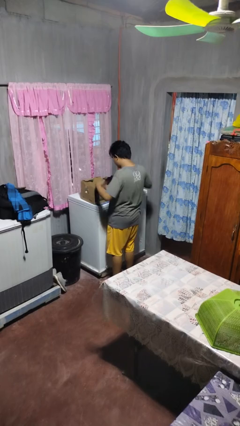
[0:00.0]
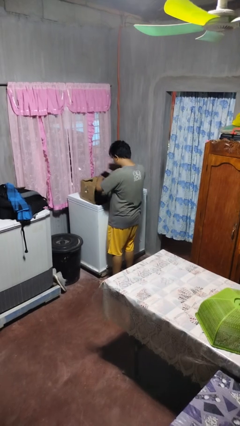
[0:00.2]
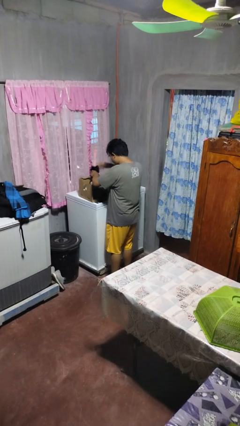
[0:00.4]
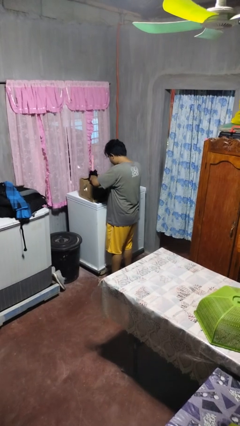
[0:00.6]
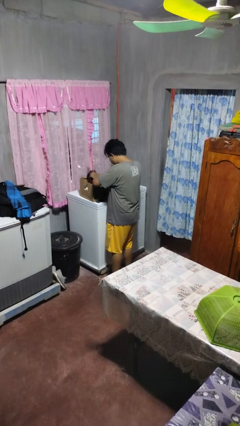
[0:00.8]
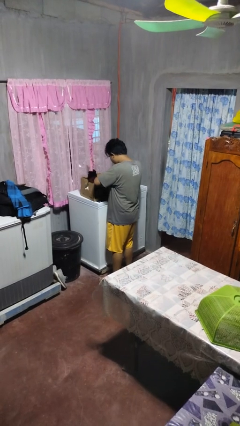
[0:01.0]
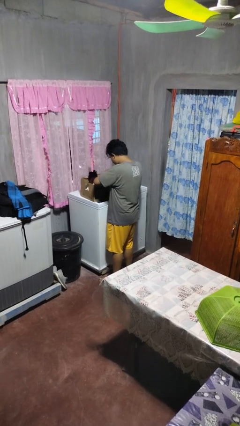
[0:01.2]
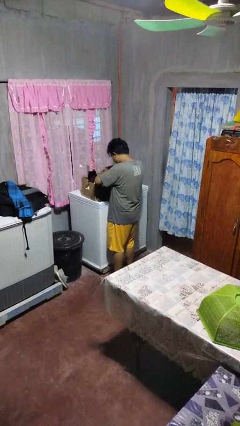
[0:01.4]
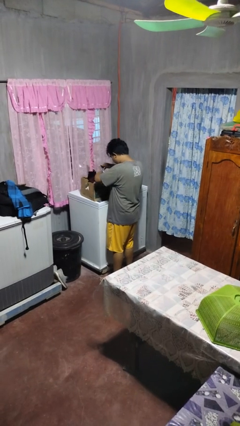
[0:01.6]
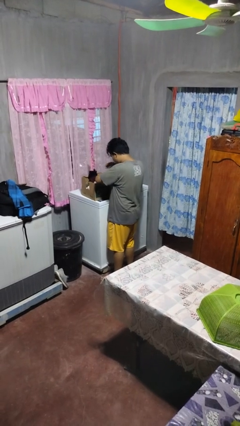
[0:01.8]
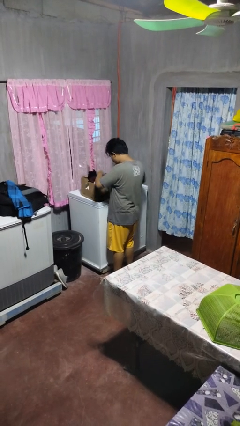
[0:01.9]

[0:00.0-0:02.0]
person searches in box

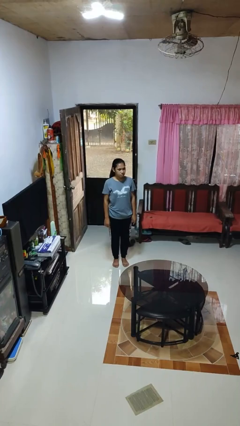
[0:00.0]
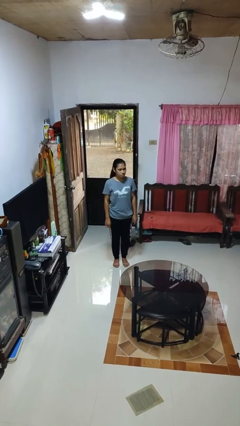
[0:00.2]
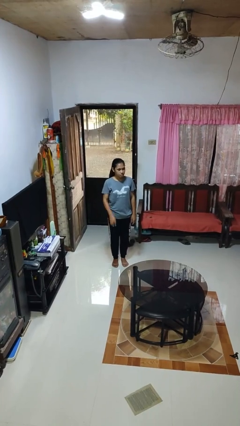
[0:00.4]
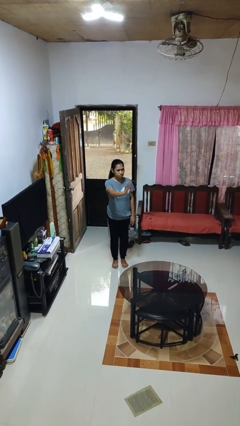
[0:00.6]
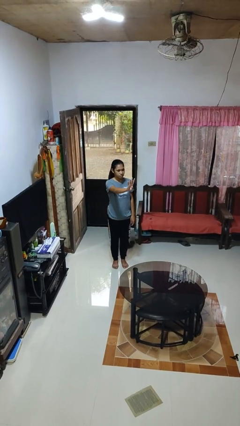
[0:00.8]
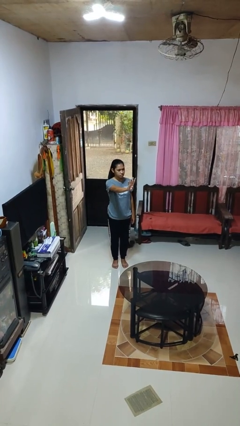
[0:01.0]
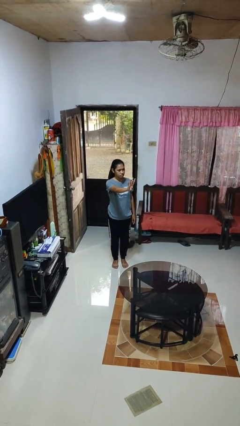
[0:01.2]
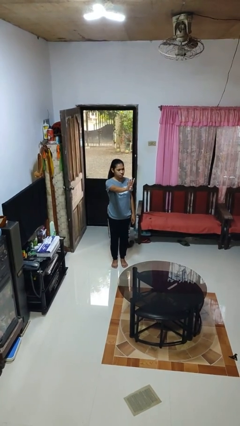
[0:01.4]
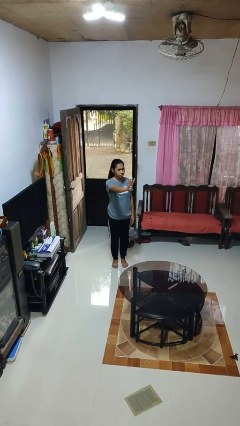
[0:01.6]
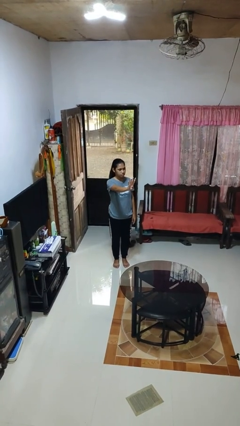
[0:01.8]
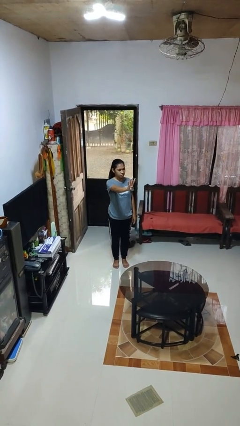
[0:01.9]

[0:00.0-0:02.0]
person gestures number four

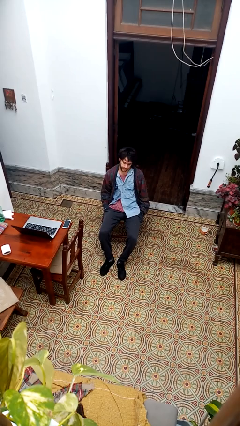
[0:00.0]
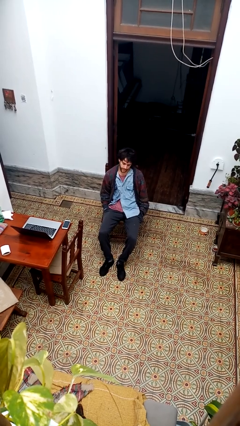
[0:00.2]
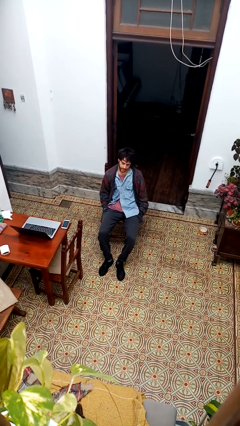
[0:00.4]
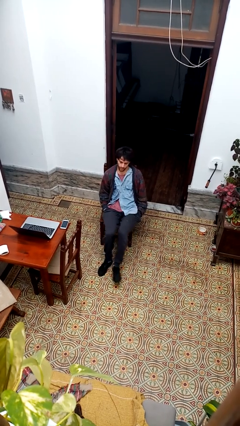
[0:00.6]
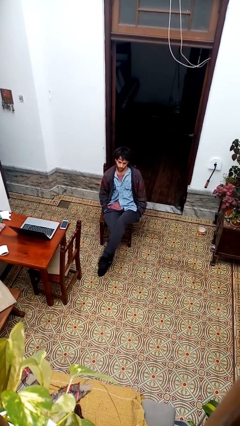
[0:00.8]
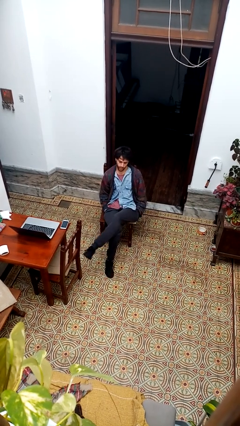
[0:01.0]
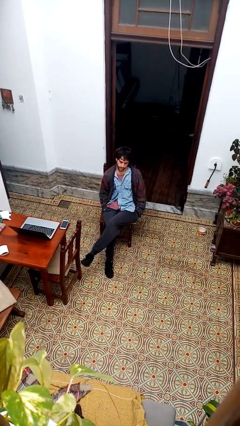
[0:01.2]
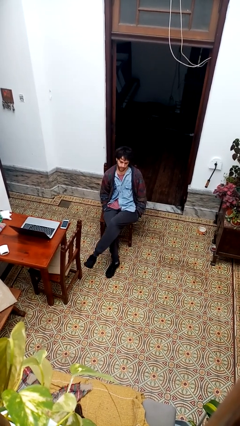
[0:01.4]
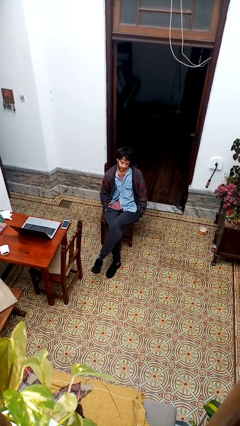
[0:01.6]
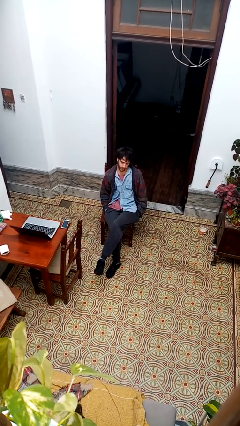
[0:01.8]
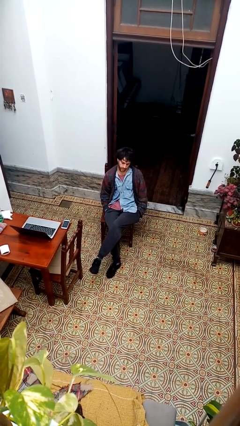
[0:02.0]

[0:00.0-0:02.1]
person crosses legs

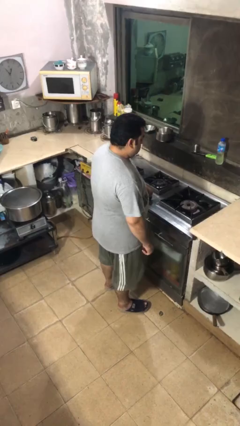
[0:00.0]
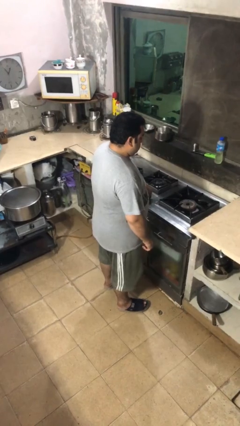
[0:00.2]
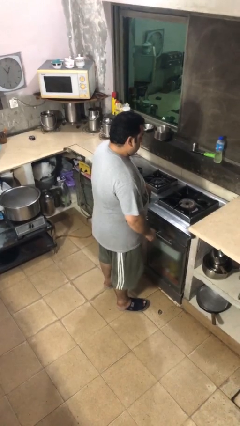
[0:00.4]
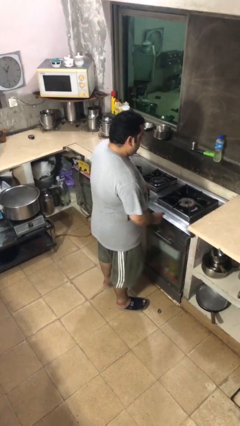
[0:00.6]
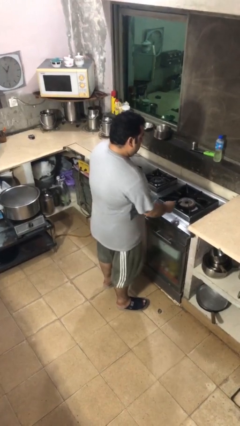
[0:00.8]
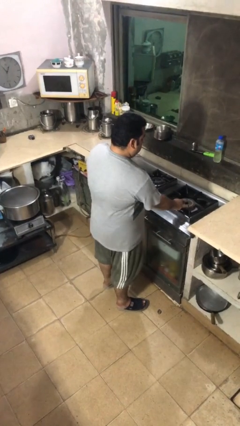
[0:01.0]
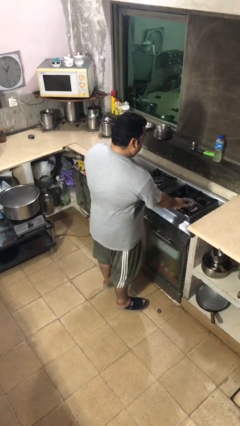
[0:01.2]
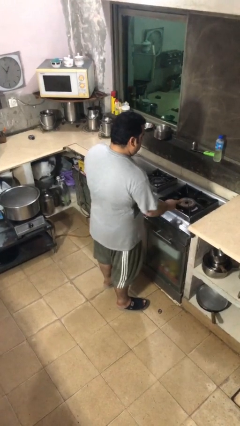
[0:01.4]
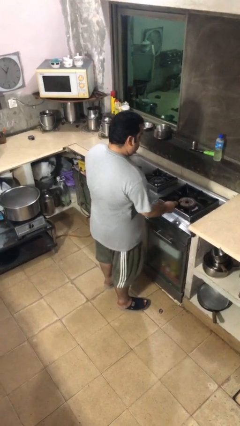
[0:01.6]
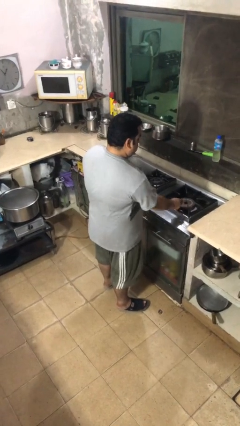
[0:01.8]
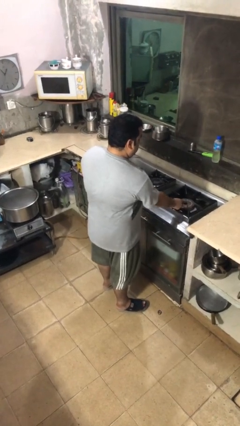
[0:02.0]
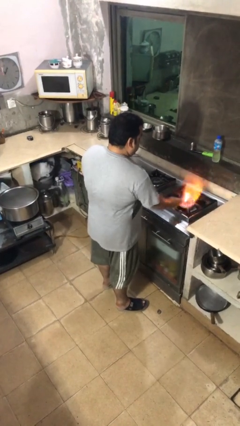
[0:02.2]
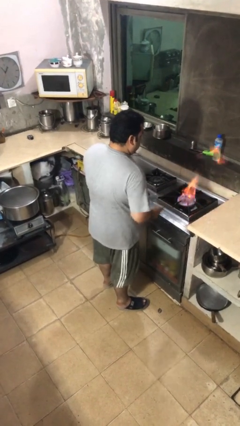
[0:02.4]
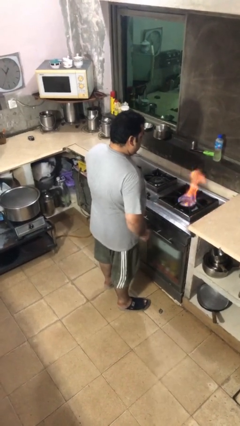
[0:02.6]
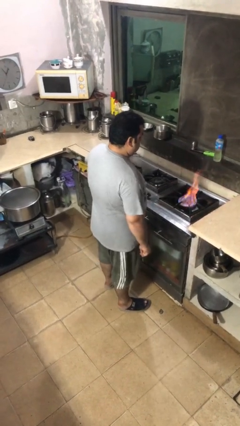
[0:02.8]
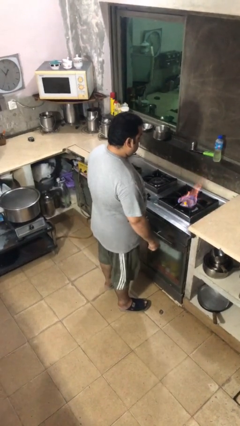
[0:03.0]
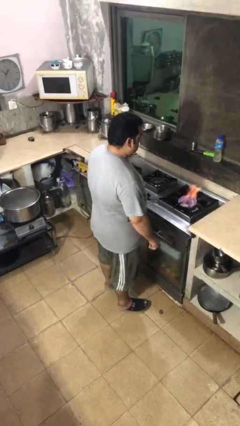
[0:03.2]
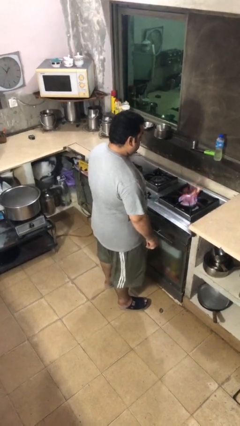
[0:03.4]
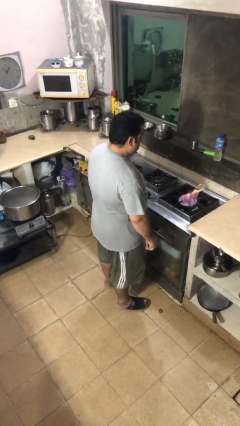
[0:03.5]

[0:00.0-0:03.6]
person turns on stovetop

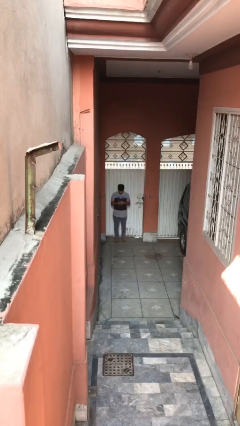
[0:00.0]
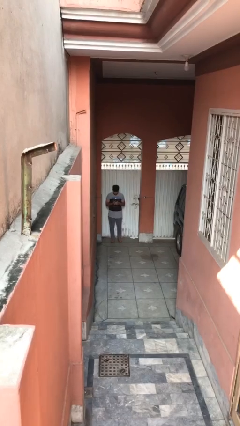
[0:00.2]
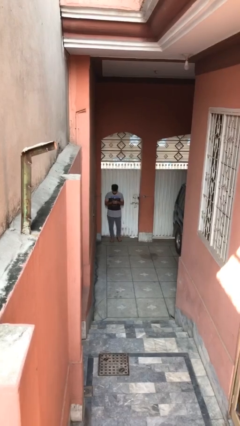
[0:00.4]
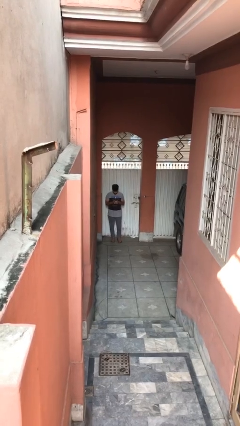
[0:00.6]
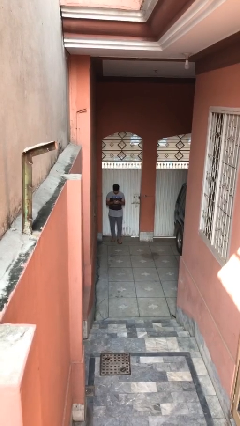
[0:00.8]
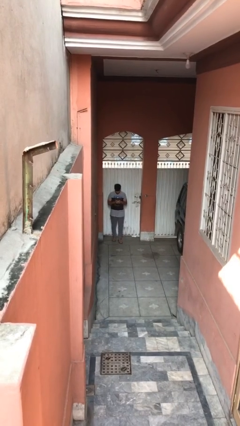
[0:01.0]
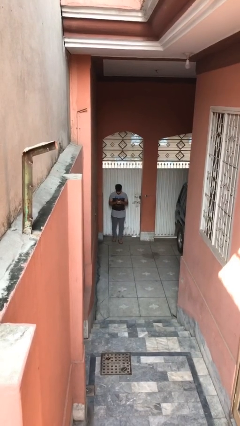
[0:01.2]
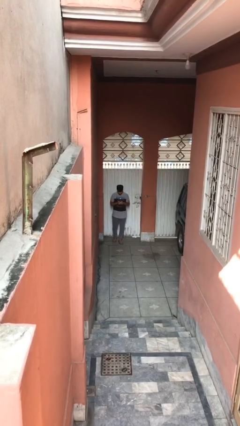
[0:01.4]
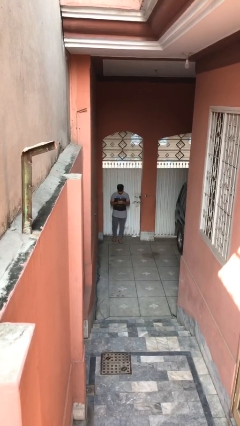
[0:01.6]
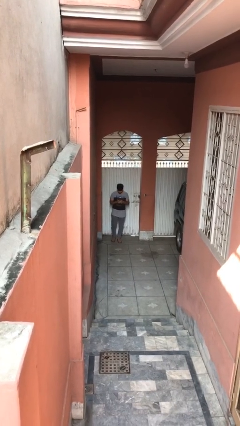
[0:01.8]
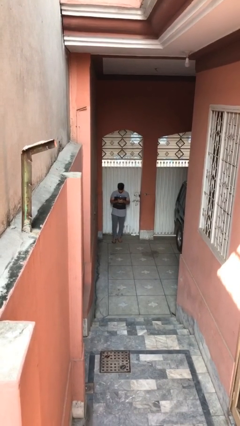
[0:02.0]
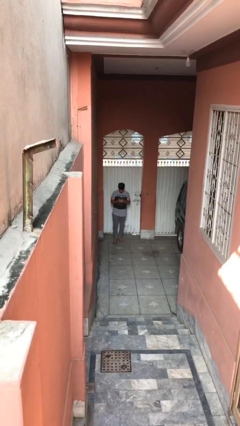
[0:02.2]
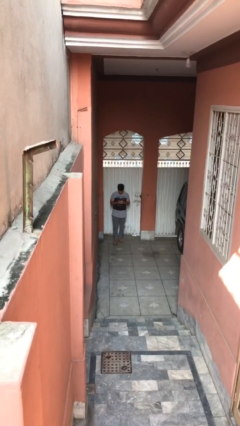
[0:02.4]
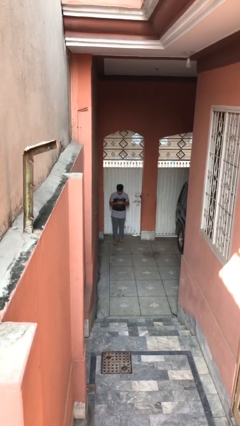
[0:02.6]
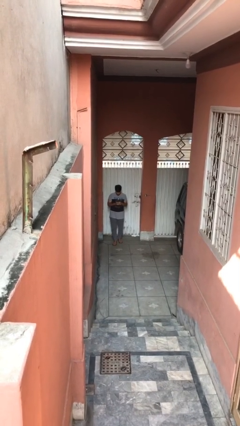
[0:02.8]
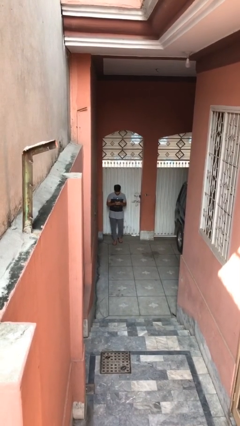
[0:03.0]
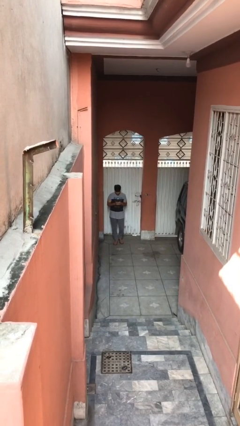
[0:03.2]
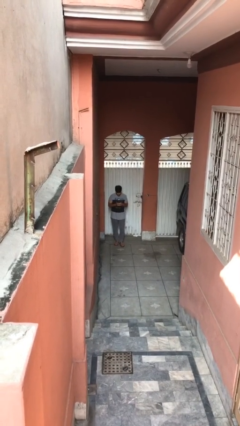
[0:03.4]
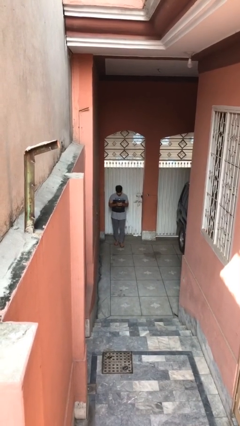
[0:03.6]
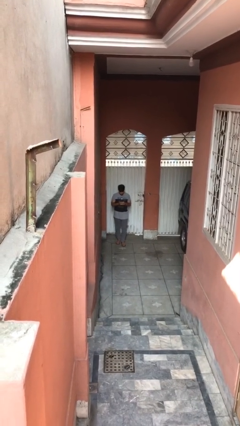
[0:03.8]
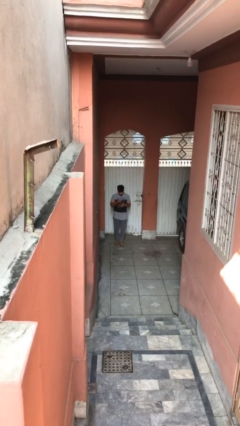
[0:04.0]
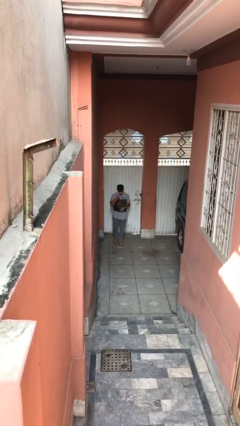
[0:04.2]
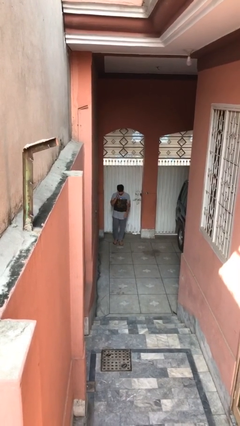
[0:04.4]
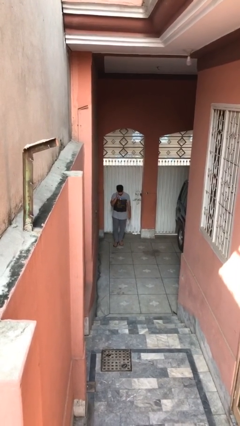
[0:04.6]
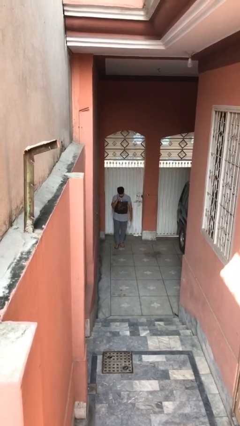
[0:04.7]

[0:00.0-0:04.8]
person texts on phone

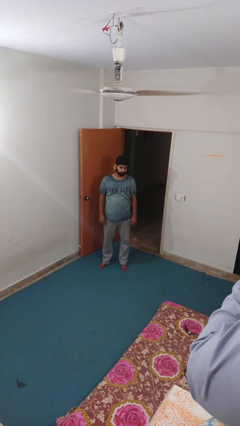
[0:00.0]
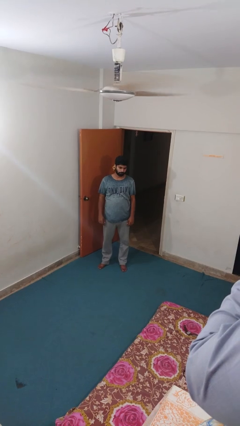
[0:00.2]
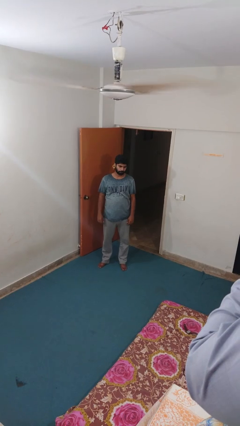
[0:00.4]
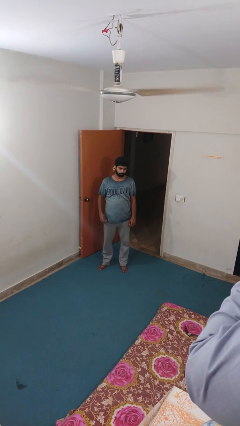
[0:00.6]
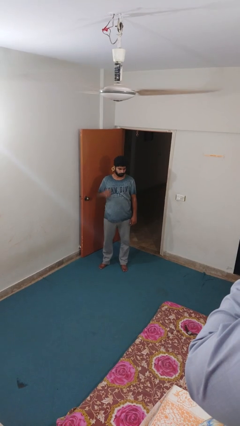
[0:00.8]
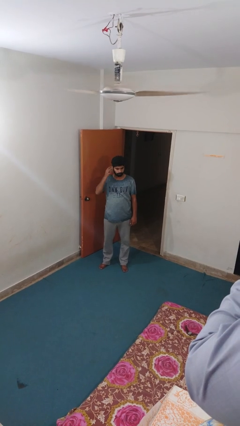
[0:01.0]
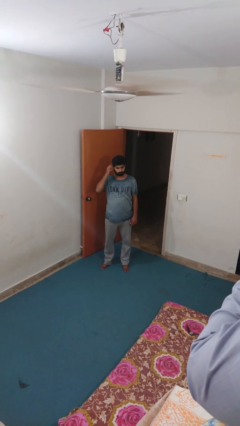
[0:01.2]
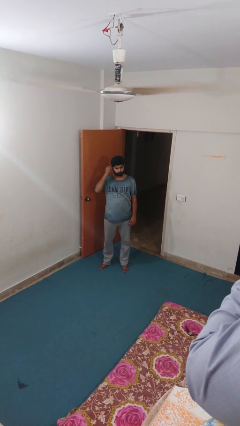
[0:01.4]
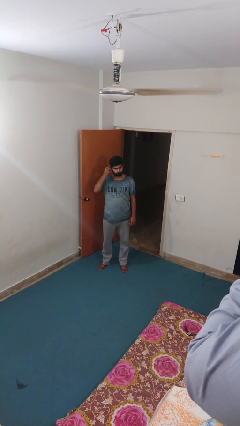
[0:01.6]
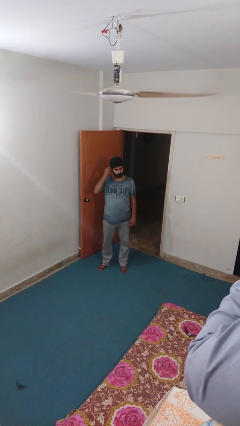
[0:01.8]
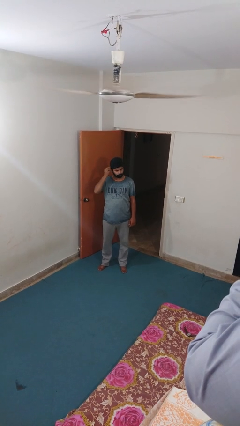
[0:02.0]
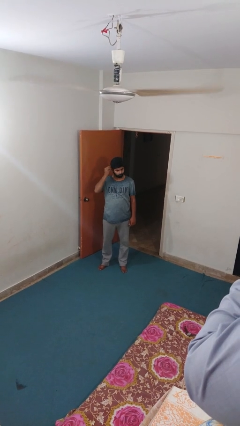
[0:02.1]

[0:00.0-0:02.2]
person takes off earrings

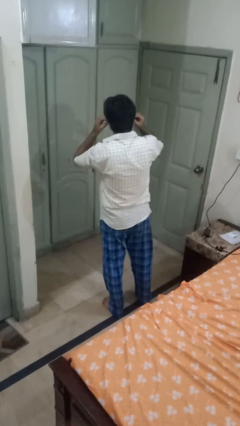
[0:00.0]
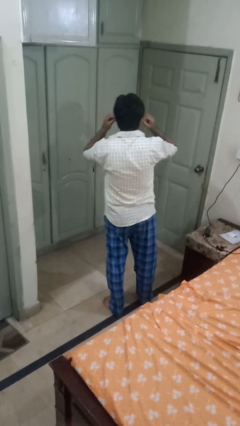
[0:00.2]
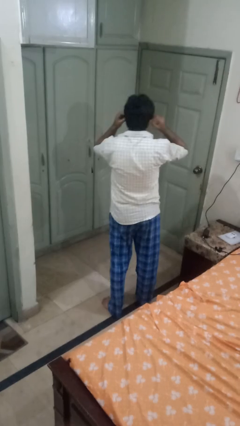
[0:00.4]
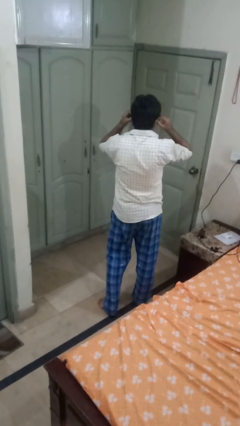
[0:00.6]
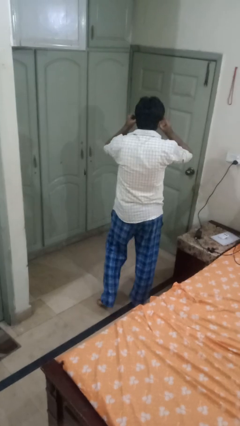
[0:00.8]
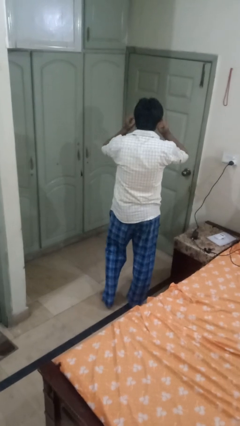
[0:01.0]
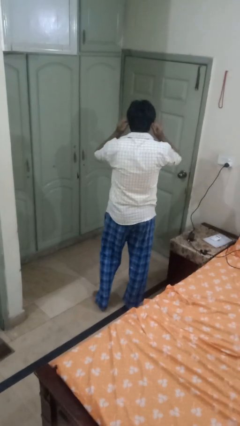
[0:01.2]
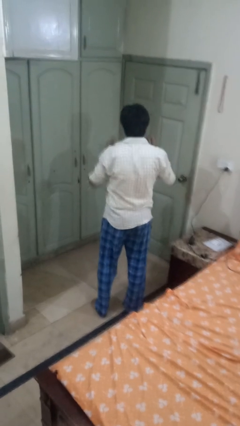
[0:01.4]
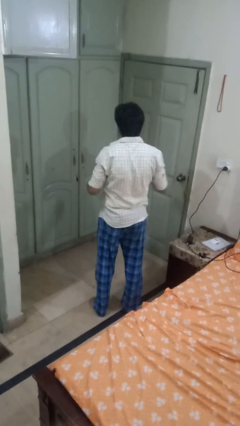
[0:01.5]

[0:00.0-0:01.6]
person puts on headphones
